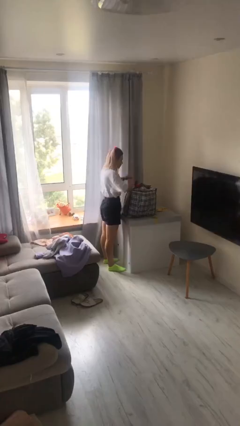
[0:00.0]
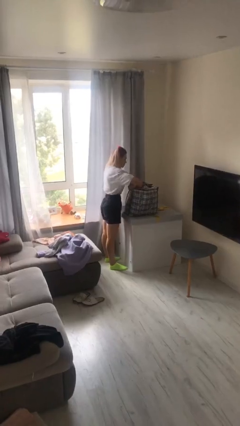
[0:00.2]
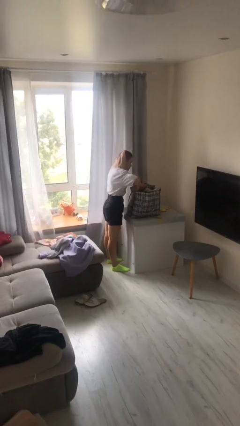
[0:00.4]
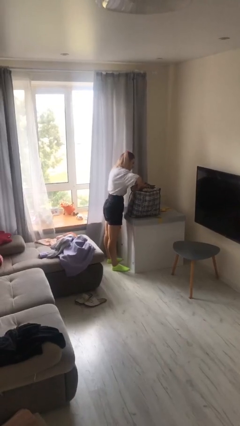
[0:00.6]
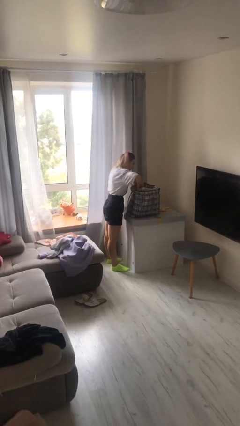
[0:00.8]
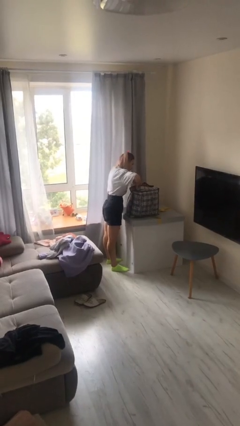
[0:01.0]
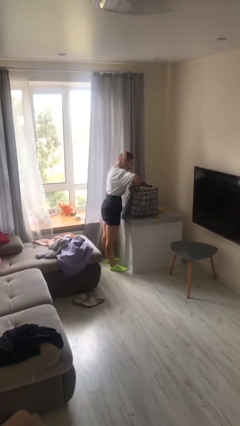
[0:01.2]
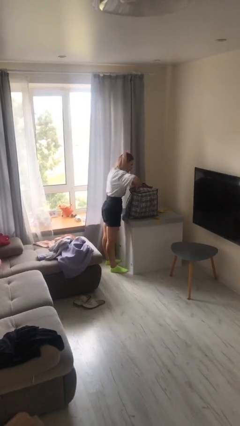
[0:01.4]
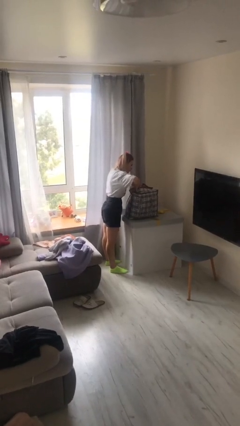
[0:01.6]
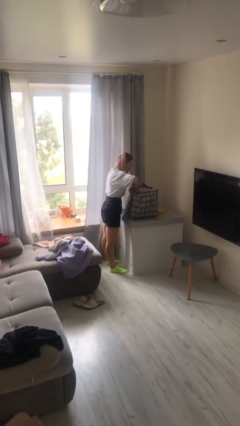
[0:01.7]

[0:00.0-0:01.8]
person searches in bag

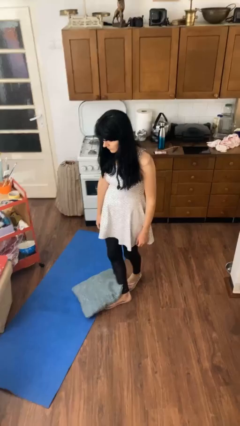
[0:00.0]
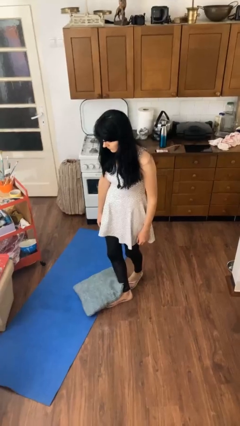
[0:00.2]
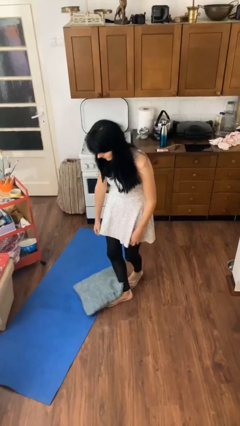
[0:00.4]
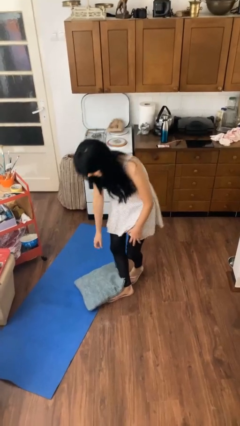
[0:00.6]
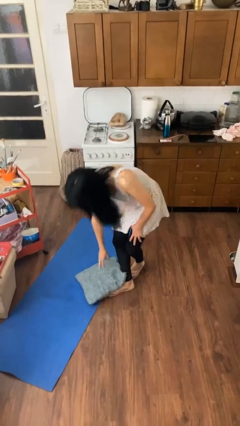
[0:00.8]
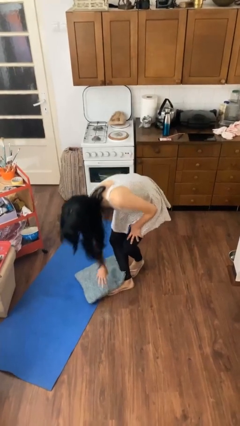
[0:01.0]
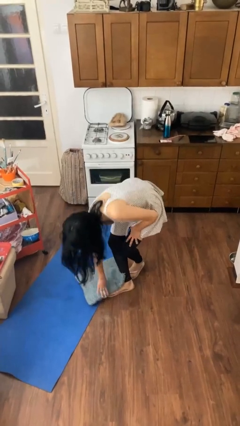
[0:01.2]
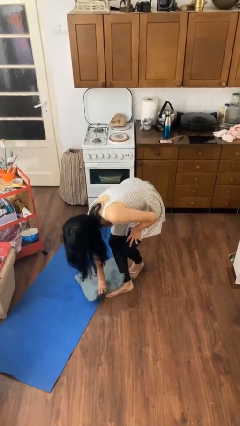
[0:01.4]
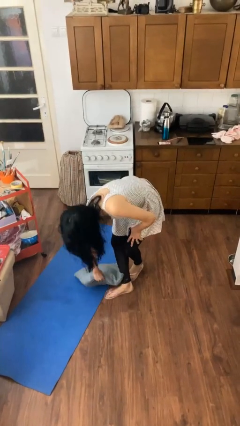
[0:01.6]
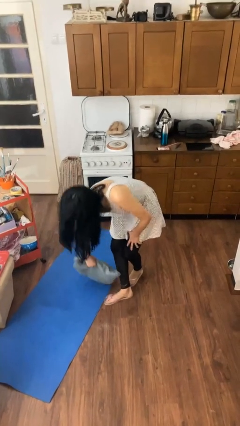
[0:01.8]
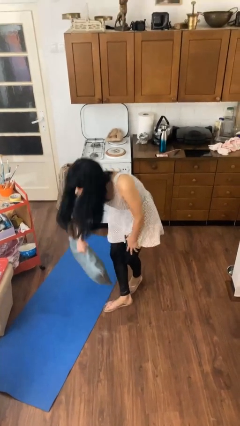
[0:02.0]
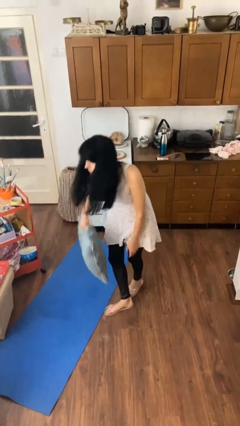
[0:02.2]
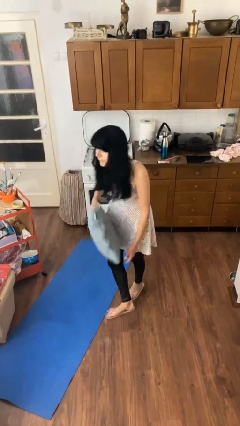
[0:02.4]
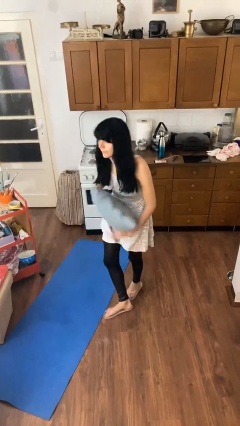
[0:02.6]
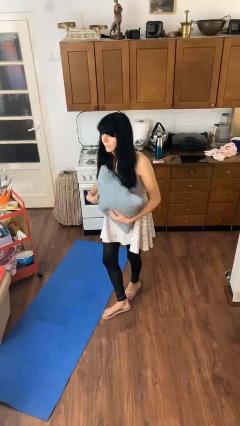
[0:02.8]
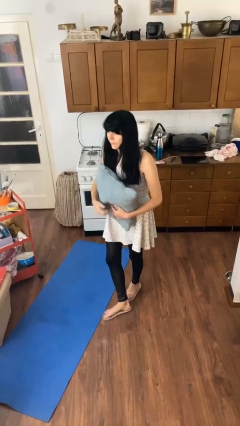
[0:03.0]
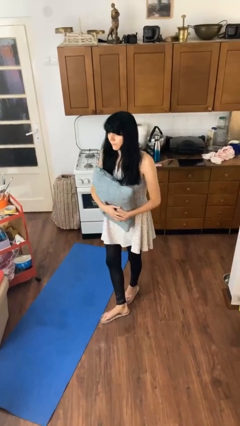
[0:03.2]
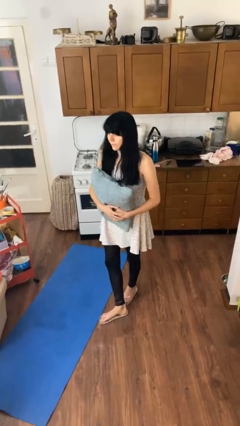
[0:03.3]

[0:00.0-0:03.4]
person picks up object from floor

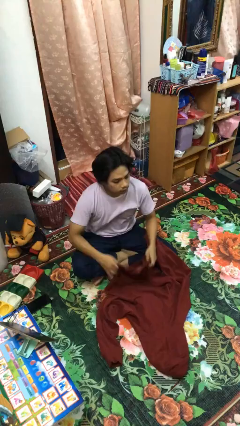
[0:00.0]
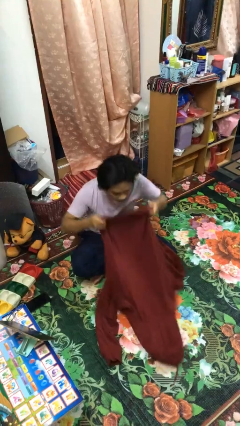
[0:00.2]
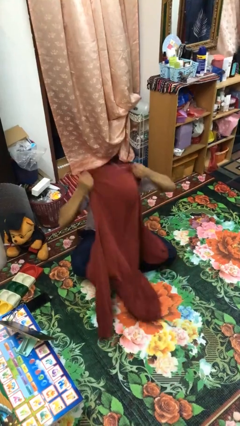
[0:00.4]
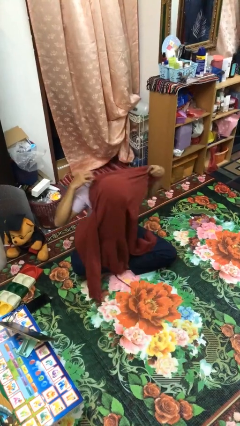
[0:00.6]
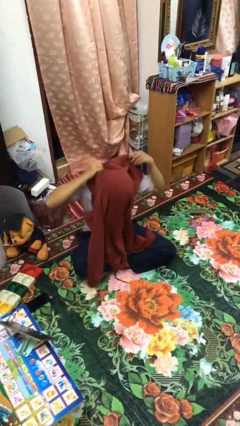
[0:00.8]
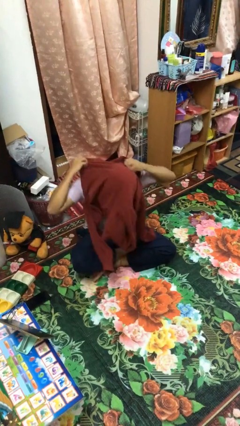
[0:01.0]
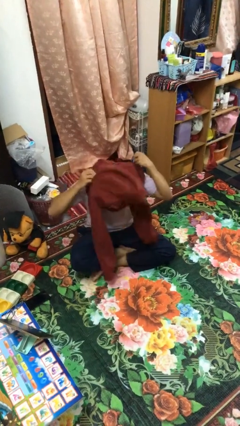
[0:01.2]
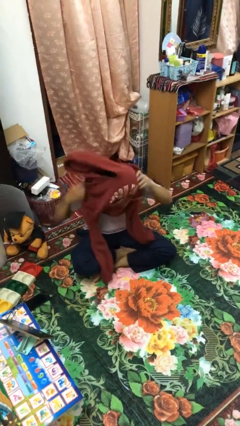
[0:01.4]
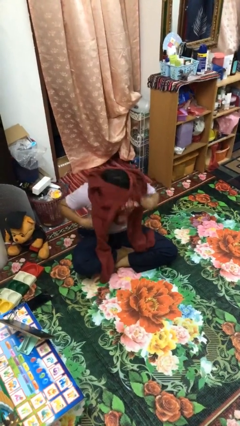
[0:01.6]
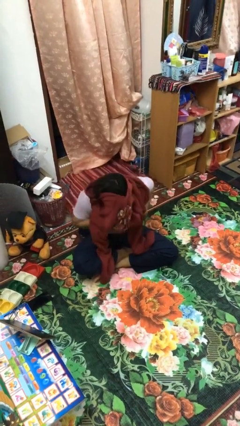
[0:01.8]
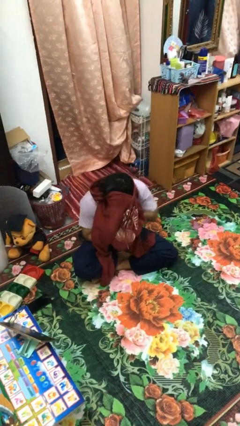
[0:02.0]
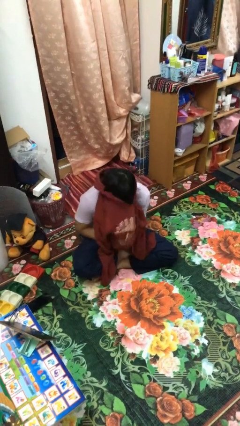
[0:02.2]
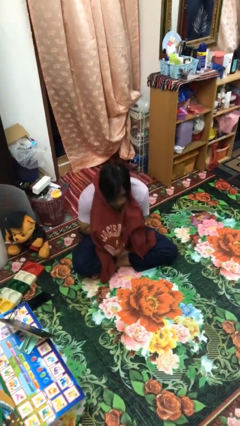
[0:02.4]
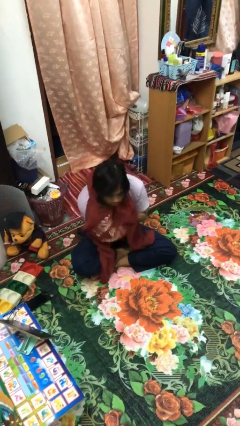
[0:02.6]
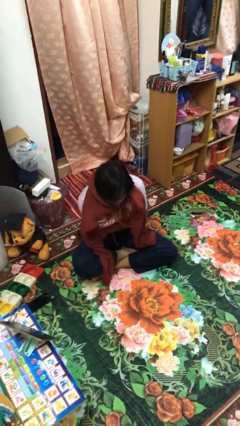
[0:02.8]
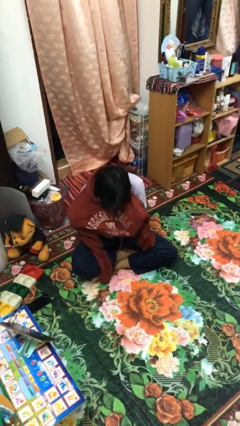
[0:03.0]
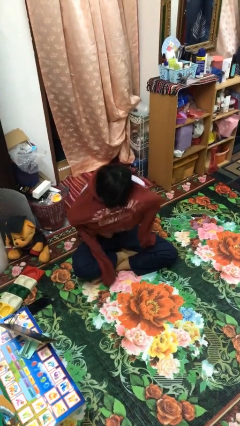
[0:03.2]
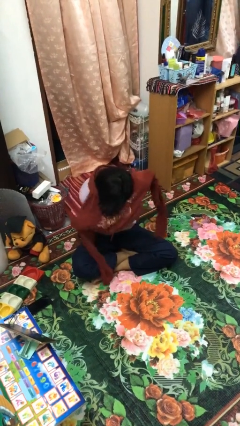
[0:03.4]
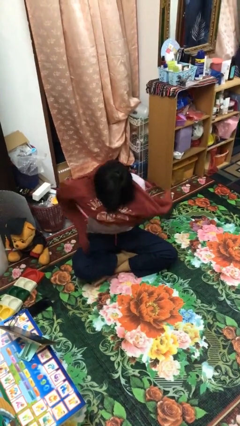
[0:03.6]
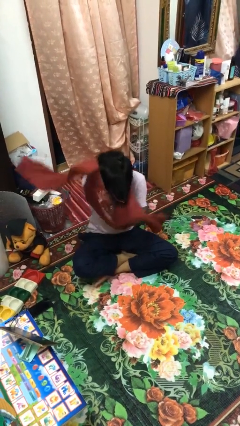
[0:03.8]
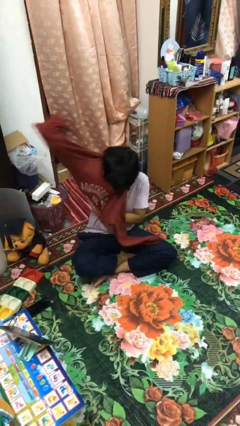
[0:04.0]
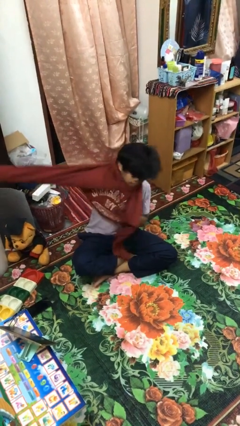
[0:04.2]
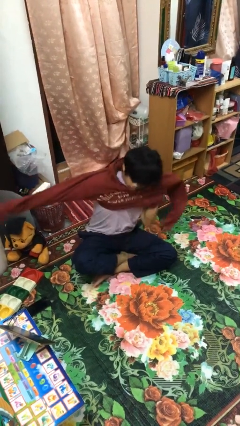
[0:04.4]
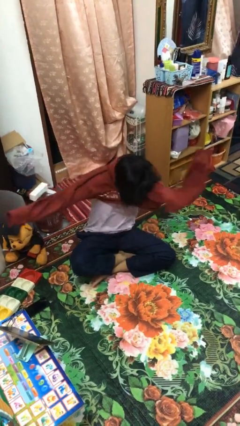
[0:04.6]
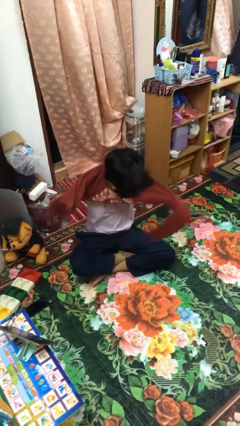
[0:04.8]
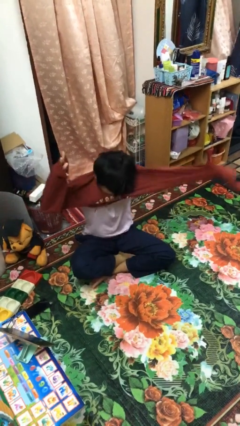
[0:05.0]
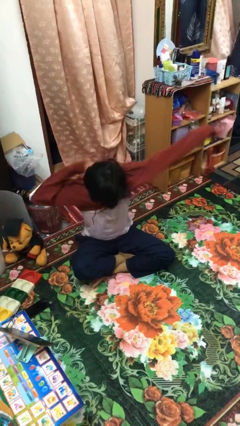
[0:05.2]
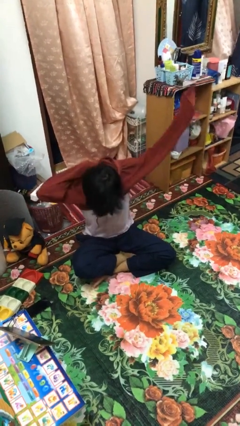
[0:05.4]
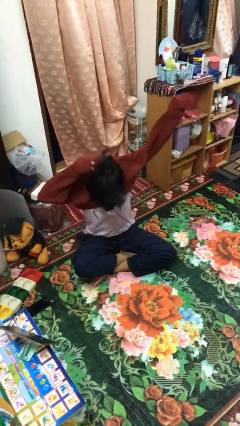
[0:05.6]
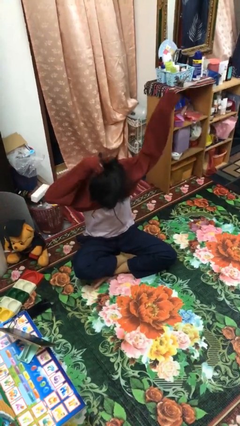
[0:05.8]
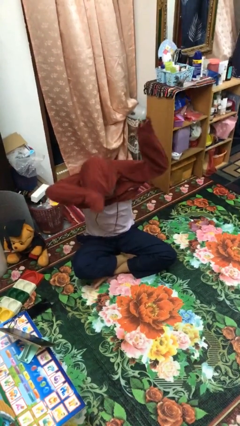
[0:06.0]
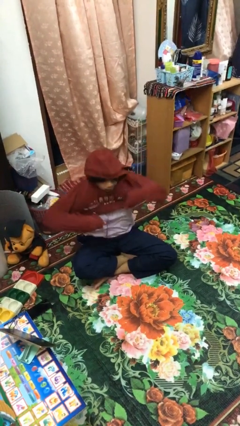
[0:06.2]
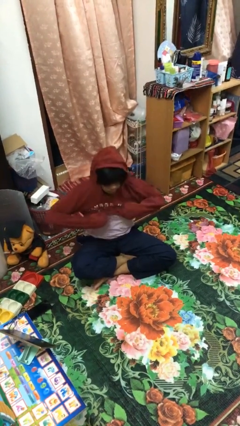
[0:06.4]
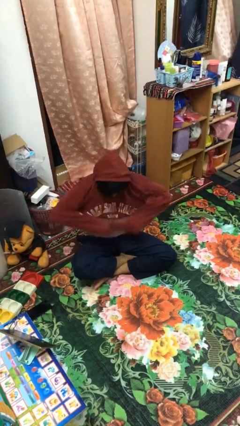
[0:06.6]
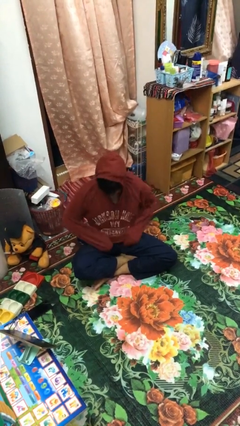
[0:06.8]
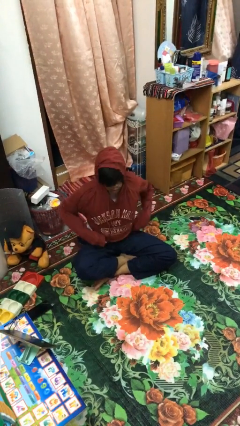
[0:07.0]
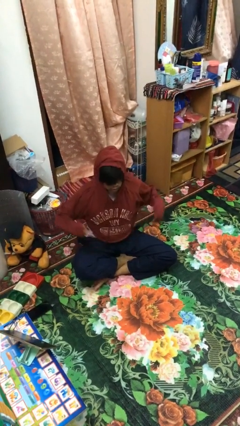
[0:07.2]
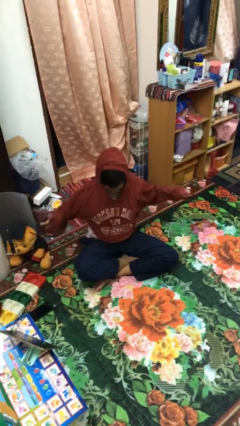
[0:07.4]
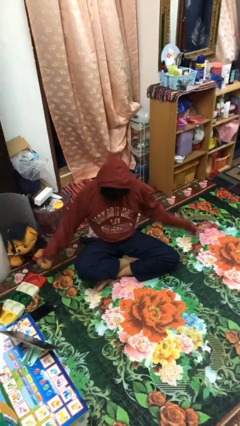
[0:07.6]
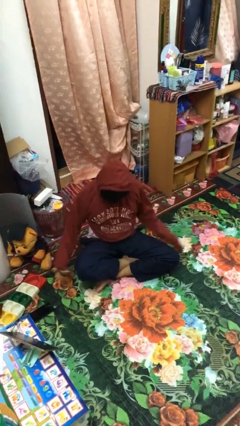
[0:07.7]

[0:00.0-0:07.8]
person puts on hoodie

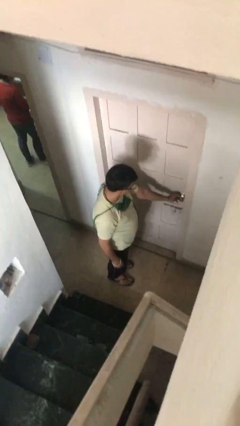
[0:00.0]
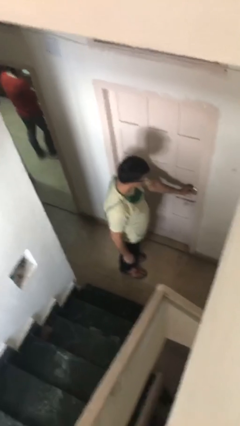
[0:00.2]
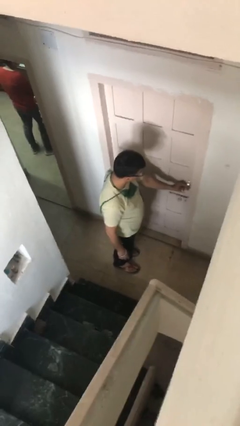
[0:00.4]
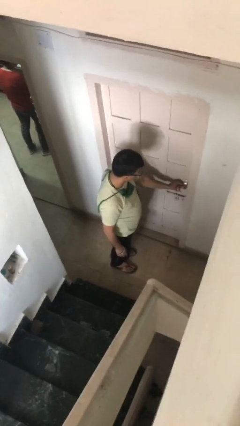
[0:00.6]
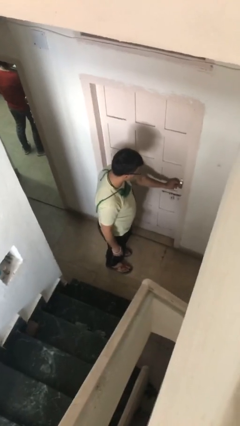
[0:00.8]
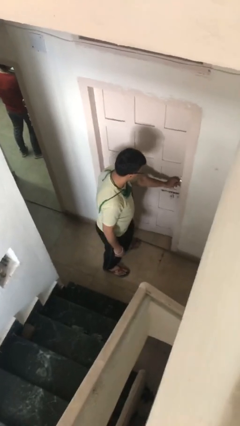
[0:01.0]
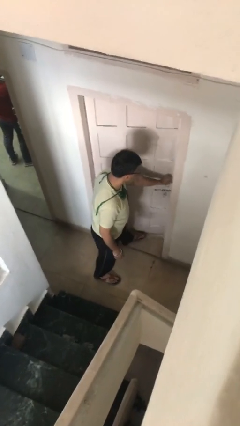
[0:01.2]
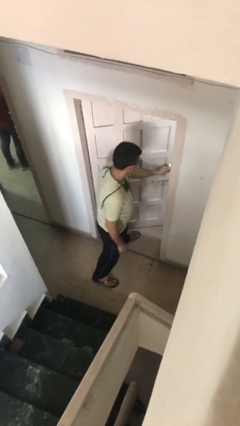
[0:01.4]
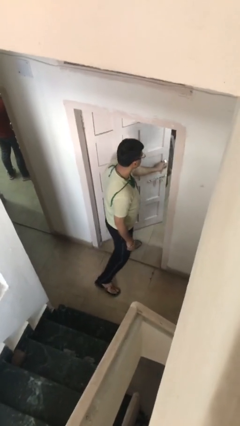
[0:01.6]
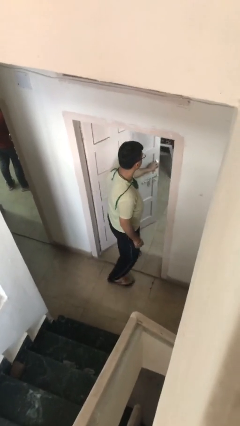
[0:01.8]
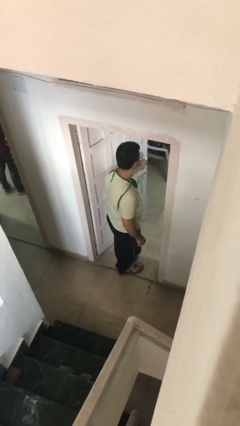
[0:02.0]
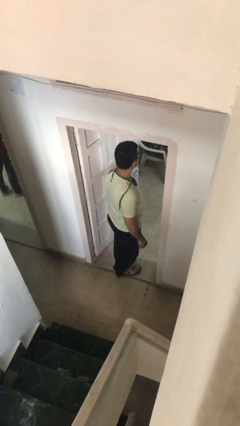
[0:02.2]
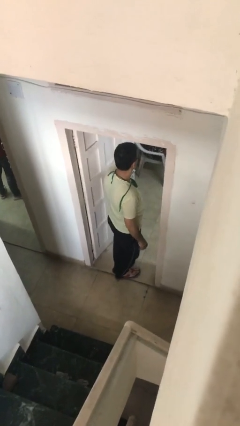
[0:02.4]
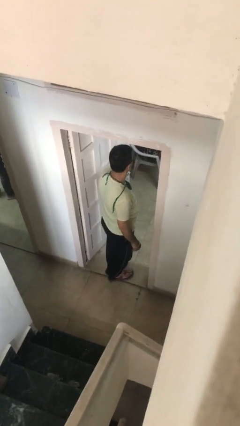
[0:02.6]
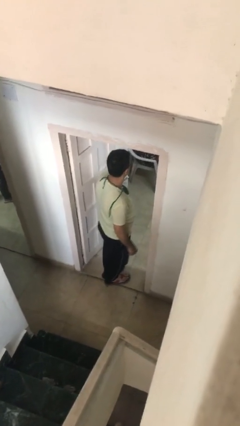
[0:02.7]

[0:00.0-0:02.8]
person opens facility door

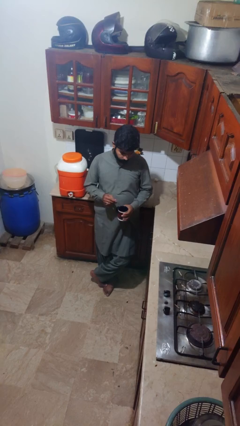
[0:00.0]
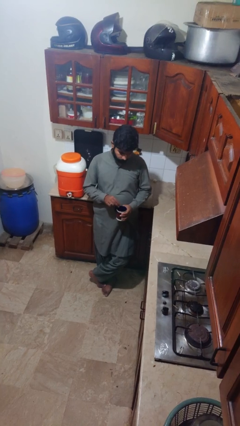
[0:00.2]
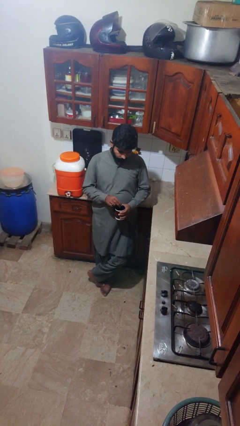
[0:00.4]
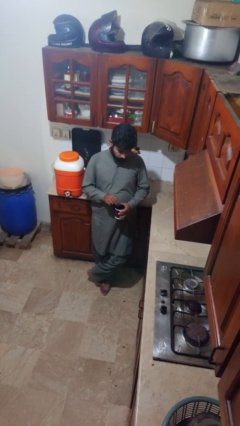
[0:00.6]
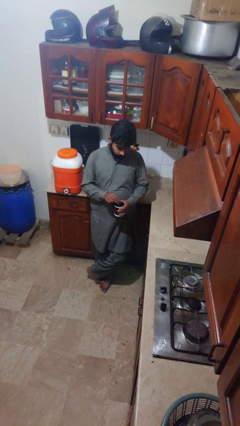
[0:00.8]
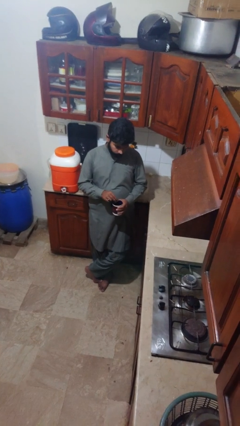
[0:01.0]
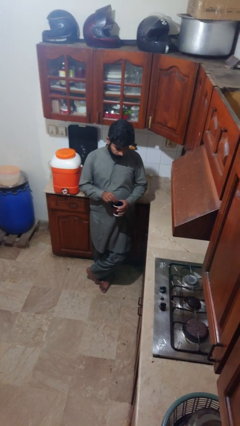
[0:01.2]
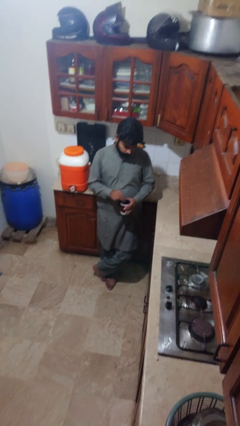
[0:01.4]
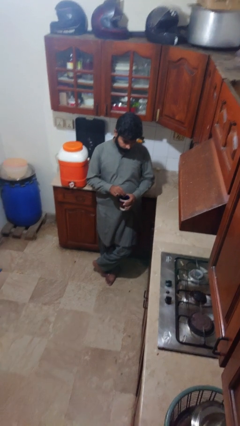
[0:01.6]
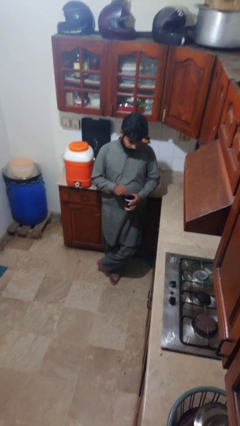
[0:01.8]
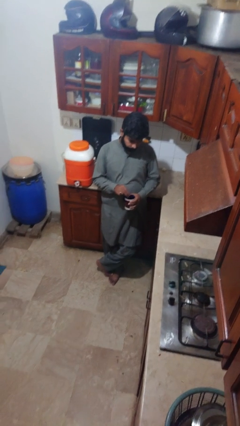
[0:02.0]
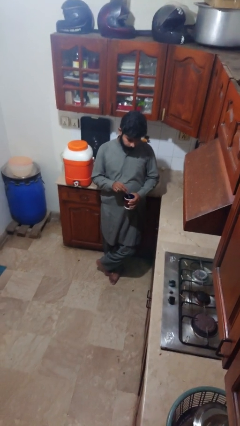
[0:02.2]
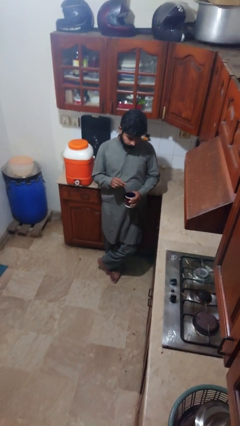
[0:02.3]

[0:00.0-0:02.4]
person stirs mug
